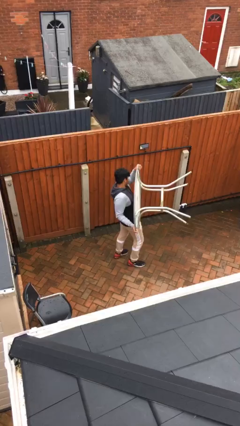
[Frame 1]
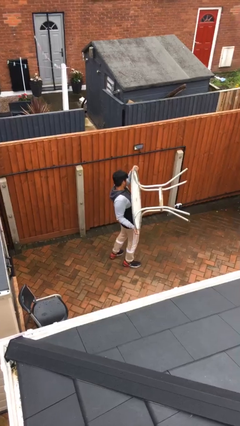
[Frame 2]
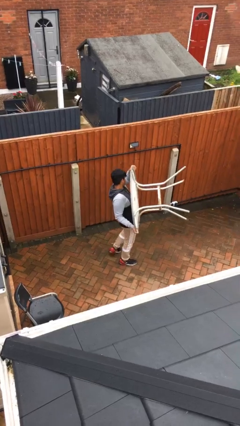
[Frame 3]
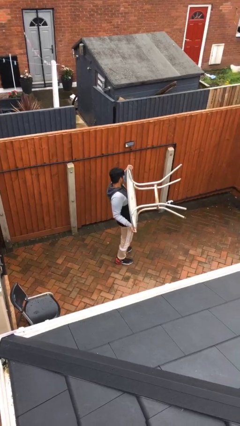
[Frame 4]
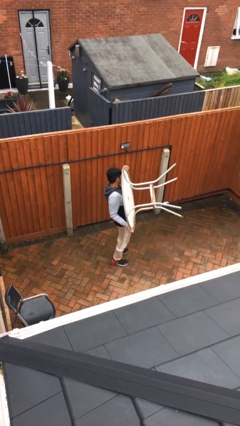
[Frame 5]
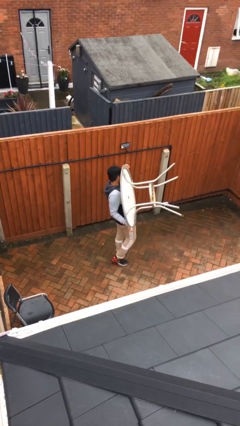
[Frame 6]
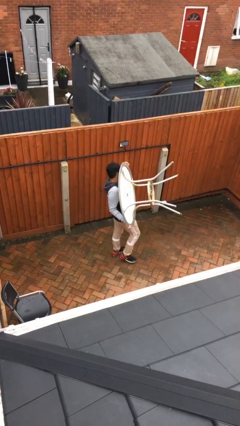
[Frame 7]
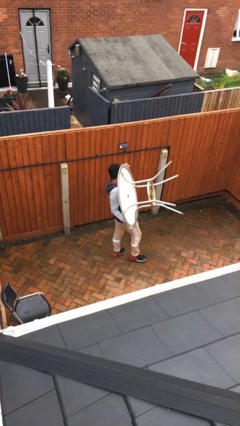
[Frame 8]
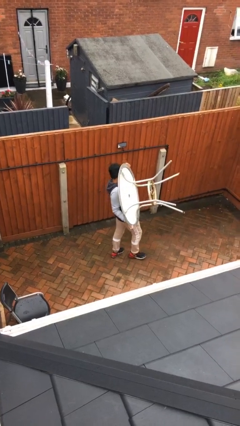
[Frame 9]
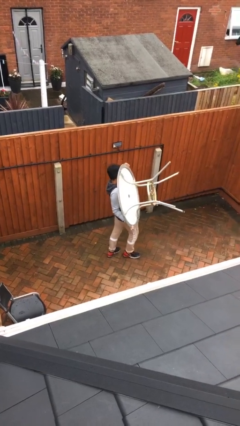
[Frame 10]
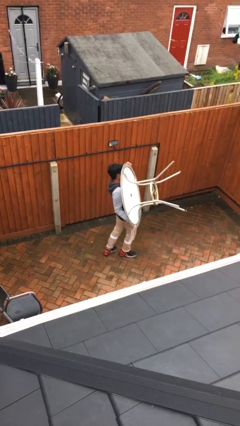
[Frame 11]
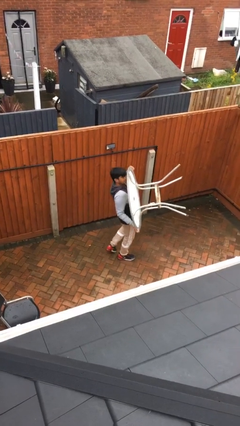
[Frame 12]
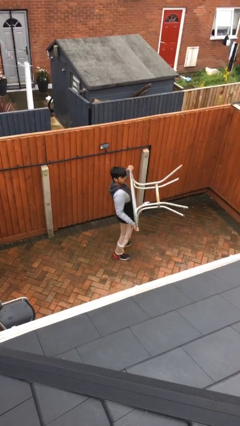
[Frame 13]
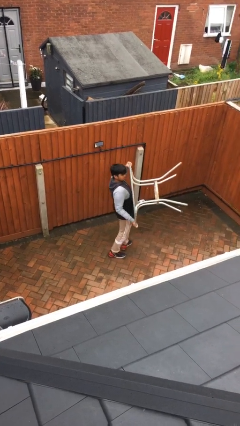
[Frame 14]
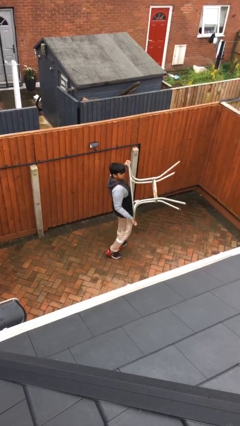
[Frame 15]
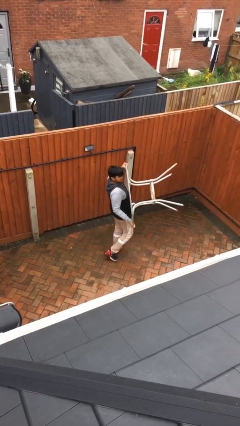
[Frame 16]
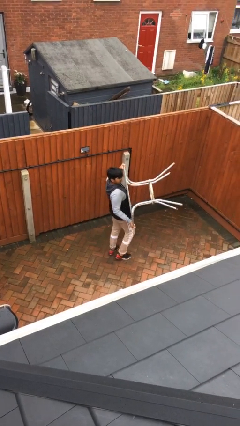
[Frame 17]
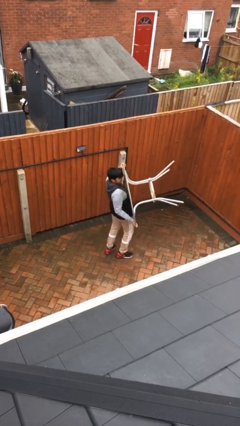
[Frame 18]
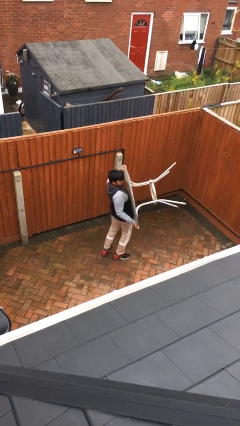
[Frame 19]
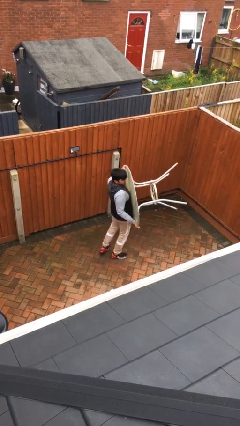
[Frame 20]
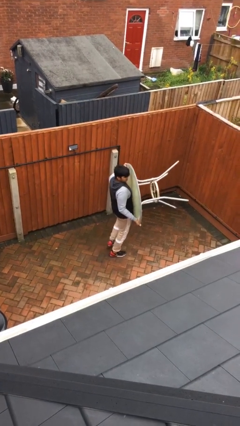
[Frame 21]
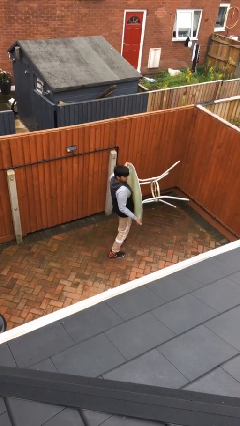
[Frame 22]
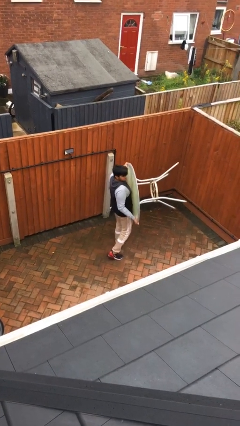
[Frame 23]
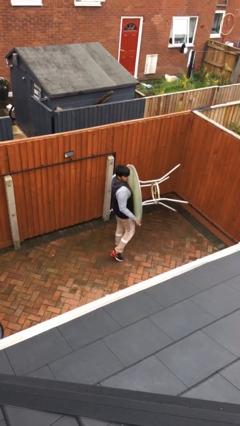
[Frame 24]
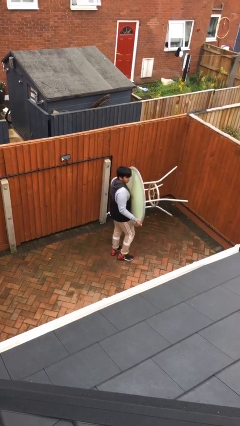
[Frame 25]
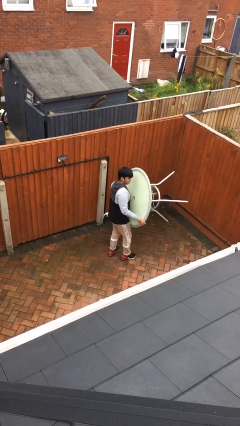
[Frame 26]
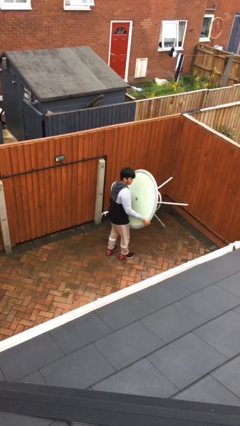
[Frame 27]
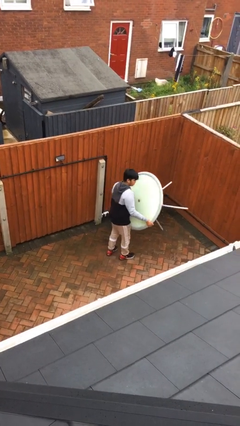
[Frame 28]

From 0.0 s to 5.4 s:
person carries heavy object

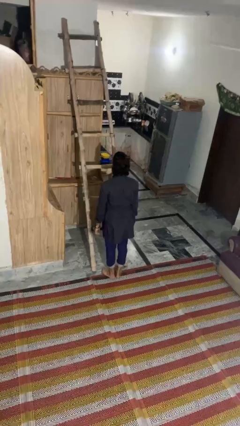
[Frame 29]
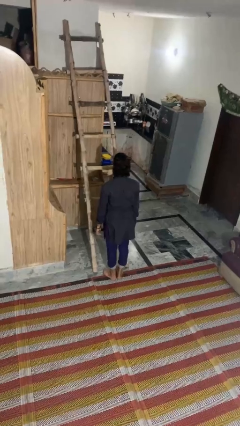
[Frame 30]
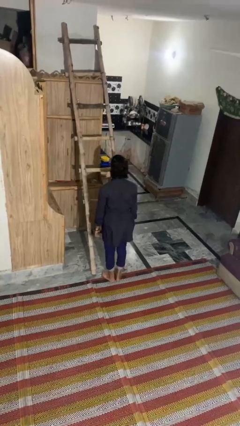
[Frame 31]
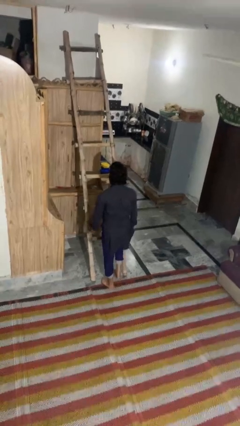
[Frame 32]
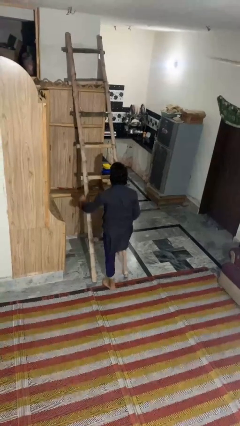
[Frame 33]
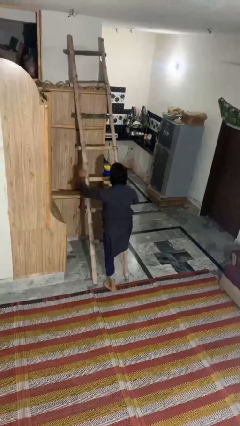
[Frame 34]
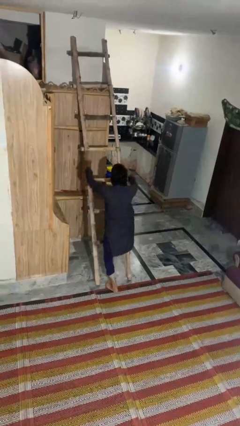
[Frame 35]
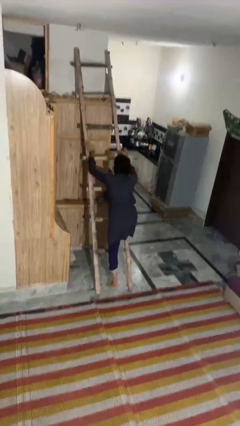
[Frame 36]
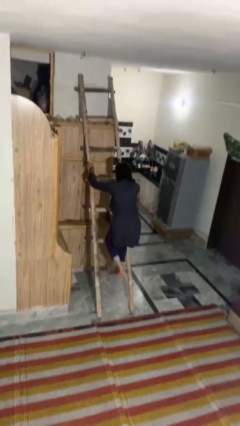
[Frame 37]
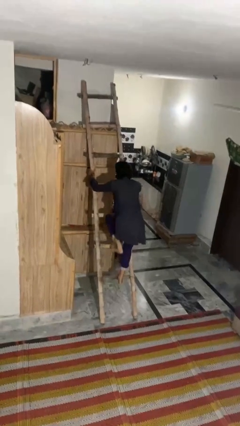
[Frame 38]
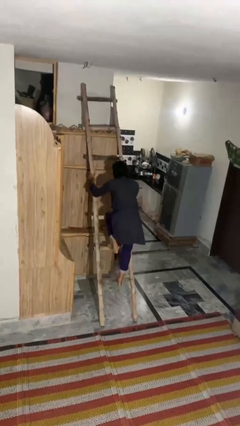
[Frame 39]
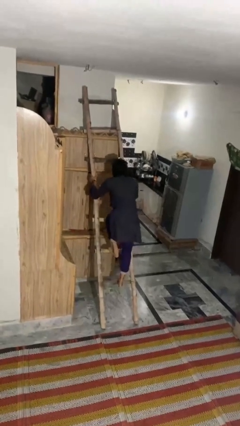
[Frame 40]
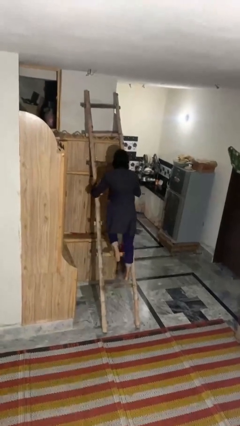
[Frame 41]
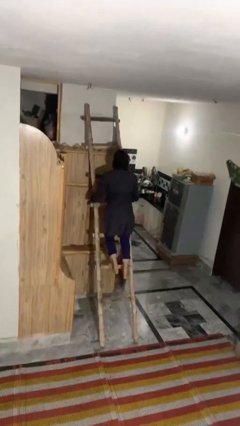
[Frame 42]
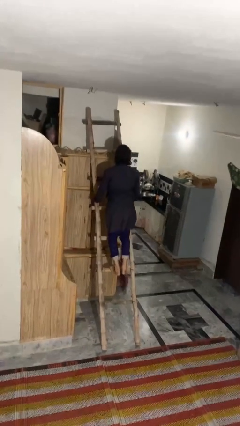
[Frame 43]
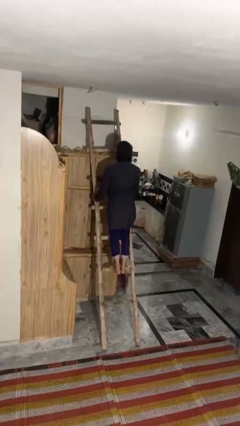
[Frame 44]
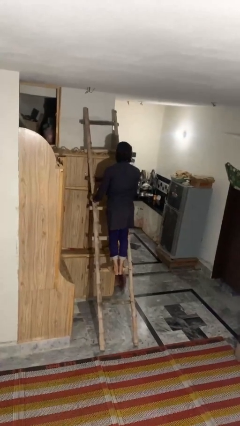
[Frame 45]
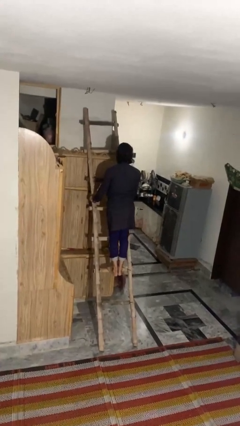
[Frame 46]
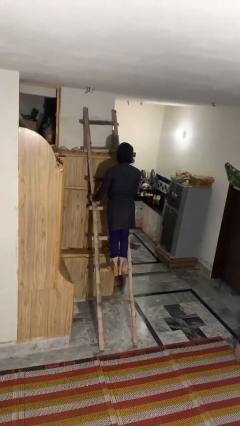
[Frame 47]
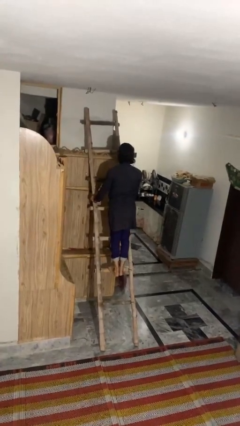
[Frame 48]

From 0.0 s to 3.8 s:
person climbs up ladder

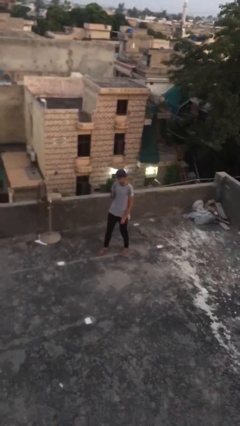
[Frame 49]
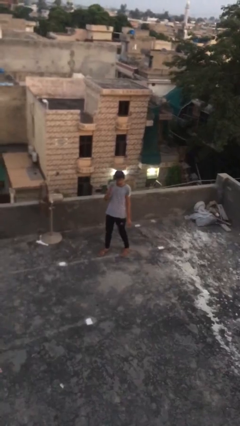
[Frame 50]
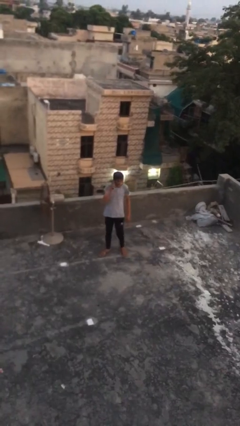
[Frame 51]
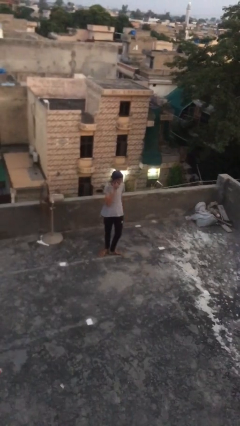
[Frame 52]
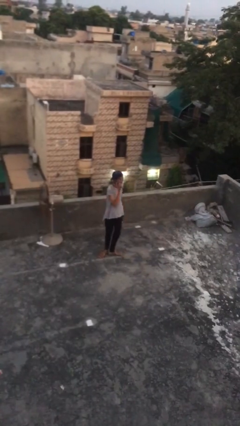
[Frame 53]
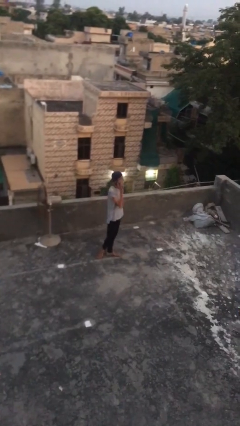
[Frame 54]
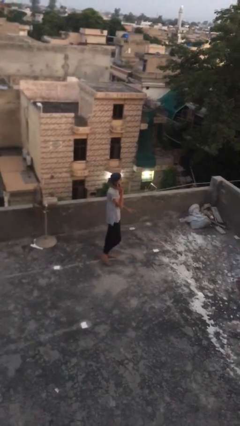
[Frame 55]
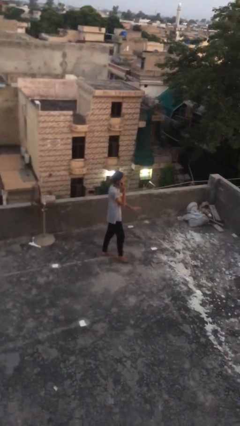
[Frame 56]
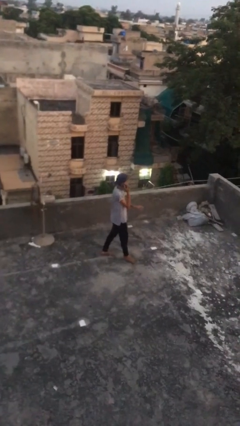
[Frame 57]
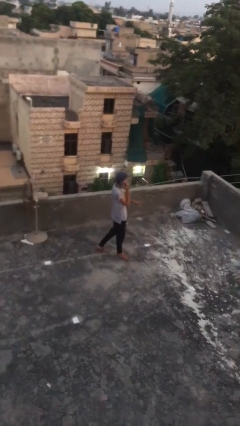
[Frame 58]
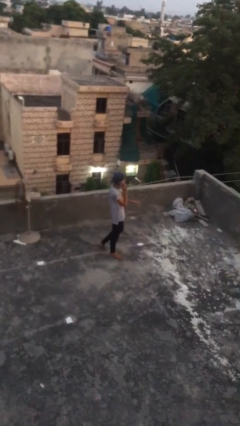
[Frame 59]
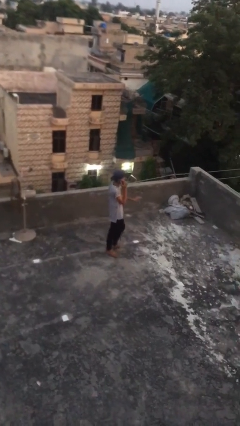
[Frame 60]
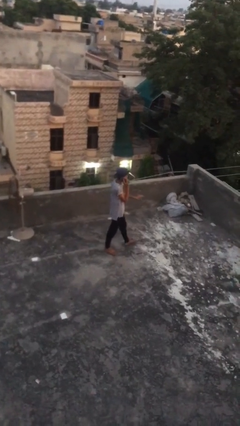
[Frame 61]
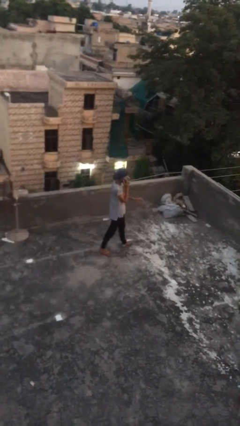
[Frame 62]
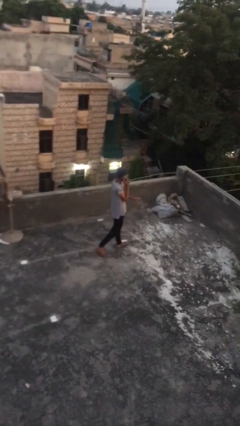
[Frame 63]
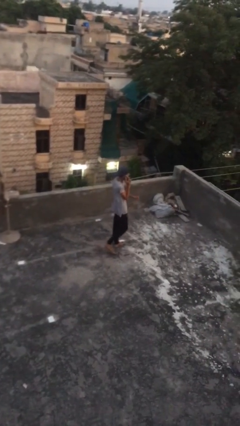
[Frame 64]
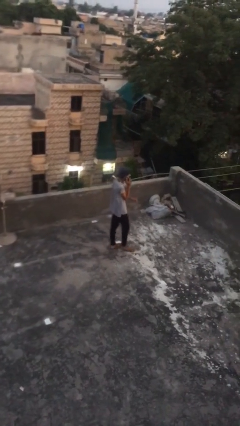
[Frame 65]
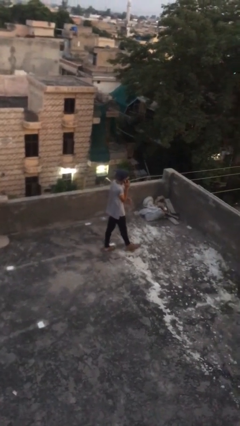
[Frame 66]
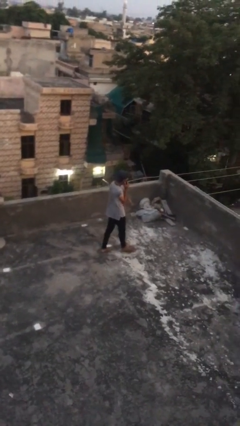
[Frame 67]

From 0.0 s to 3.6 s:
person talks on phone

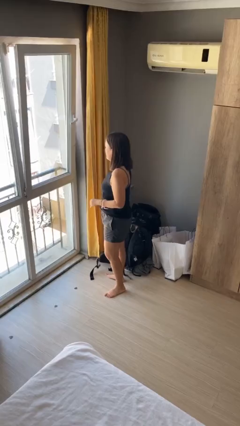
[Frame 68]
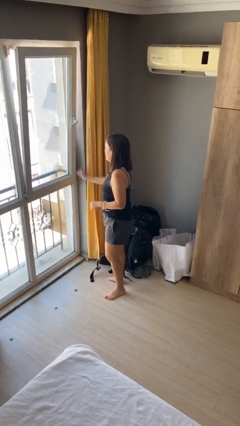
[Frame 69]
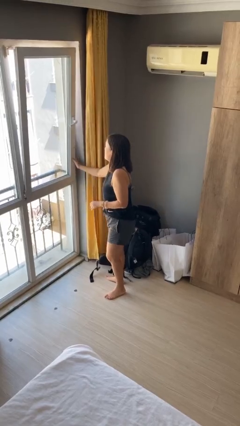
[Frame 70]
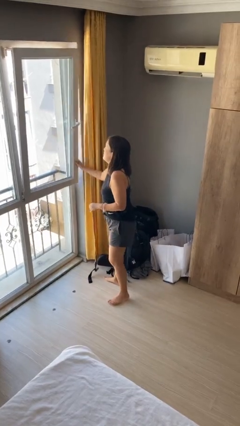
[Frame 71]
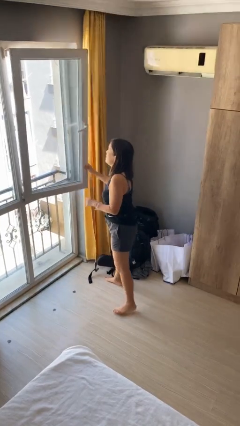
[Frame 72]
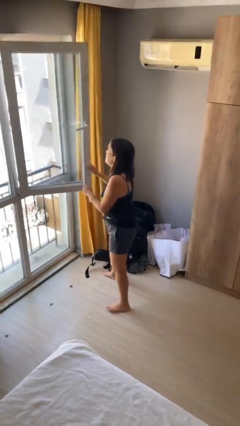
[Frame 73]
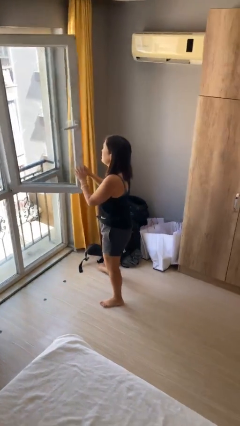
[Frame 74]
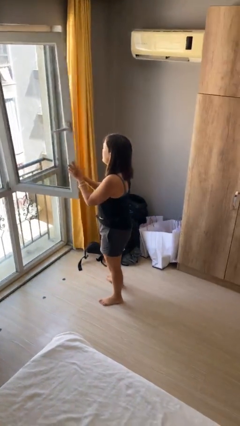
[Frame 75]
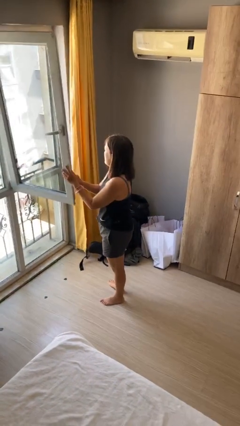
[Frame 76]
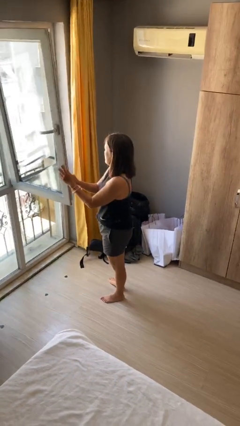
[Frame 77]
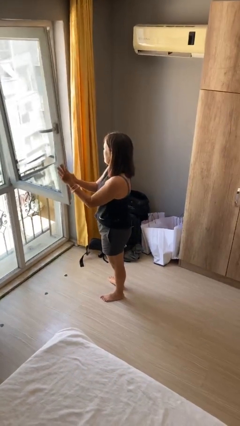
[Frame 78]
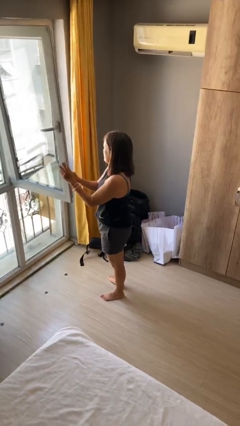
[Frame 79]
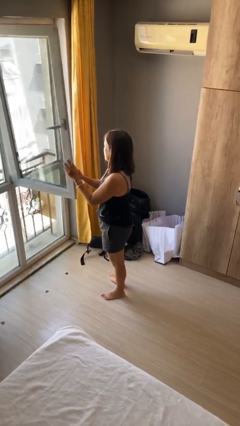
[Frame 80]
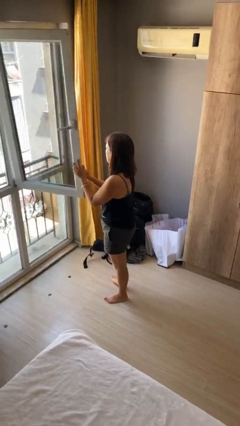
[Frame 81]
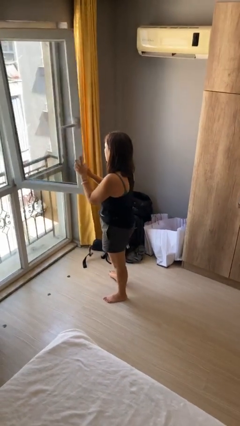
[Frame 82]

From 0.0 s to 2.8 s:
person opens home window

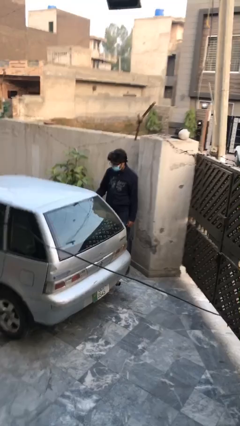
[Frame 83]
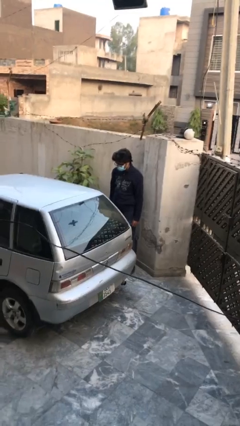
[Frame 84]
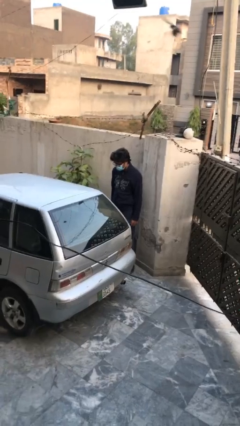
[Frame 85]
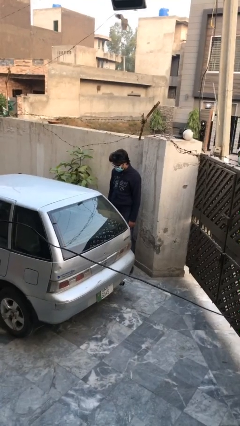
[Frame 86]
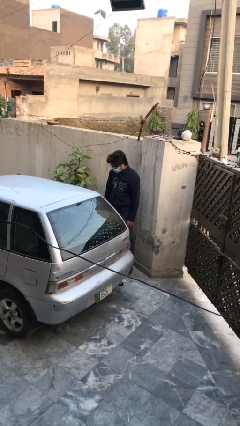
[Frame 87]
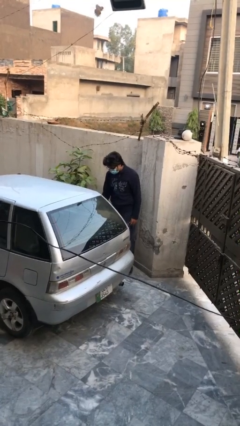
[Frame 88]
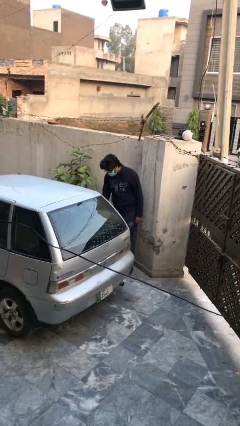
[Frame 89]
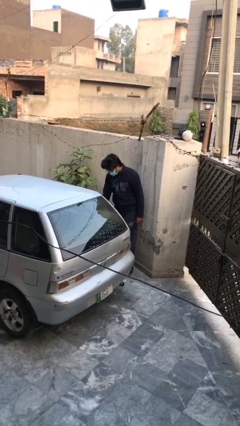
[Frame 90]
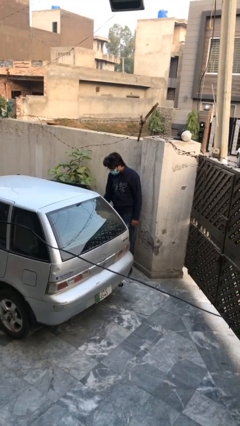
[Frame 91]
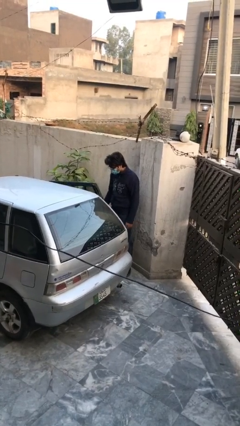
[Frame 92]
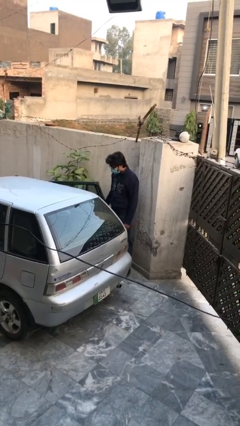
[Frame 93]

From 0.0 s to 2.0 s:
person opens car door

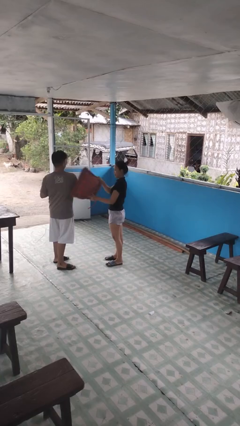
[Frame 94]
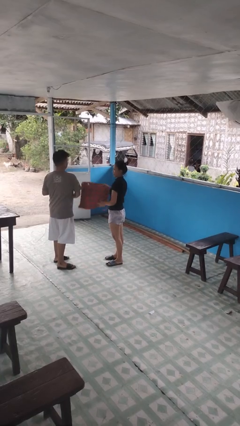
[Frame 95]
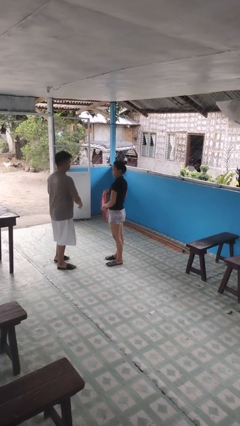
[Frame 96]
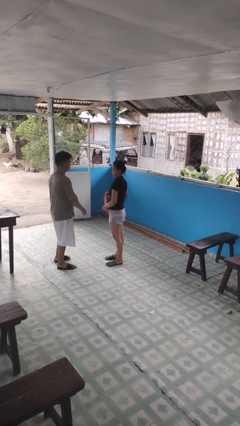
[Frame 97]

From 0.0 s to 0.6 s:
person hits person with pillow
